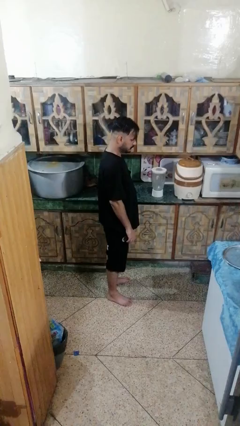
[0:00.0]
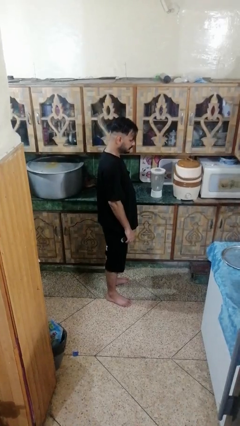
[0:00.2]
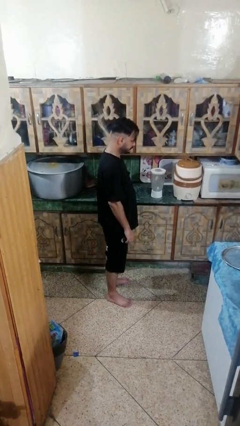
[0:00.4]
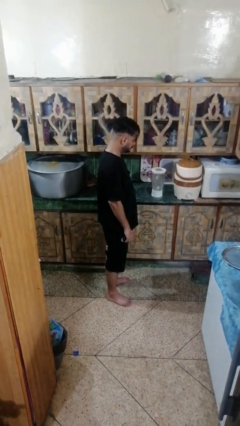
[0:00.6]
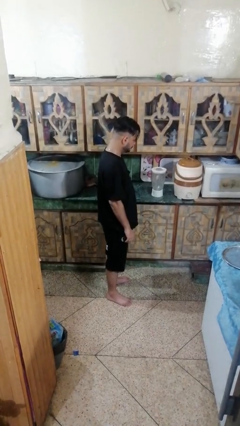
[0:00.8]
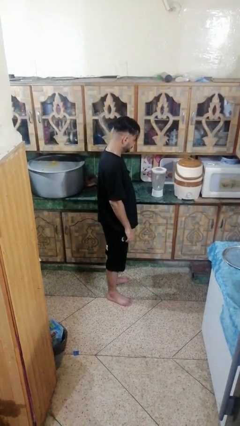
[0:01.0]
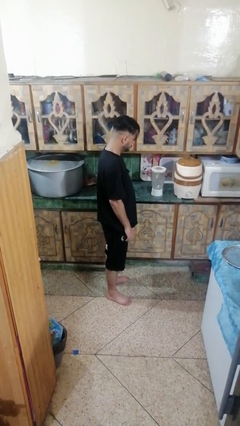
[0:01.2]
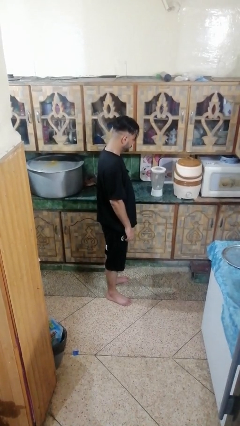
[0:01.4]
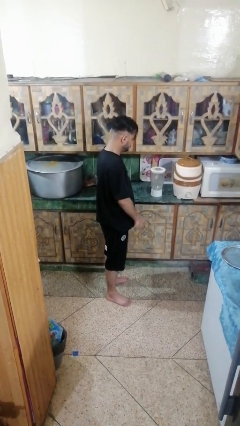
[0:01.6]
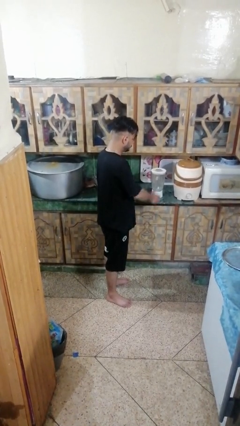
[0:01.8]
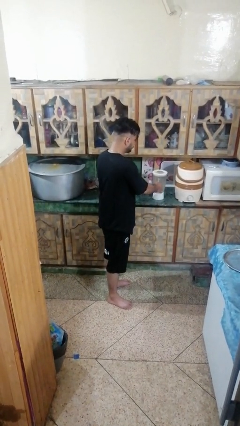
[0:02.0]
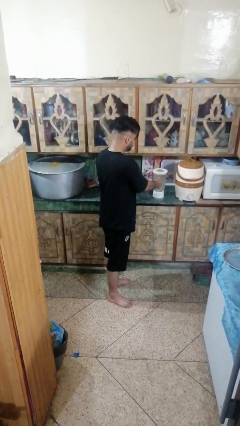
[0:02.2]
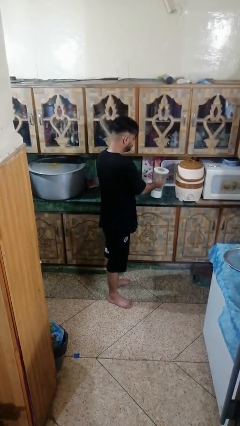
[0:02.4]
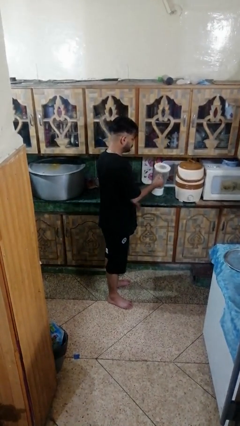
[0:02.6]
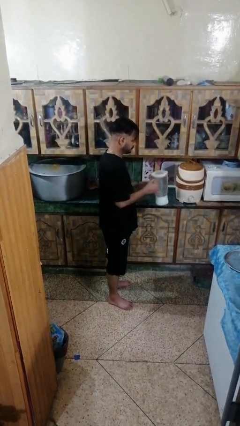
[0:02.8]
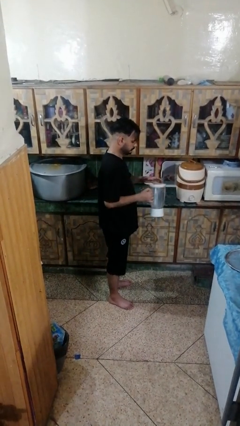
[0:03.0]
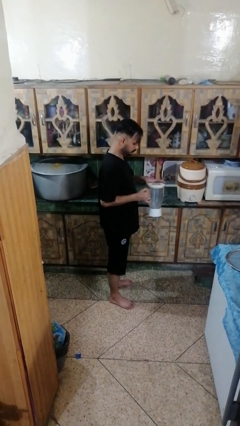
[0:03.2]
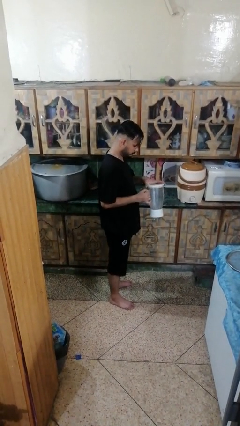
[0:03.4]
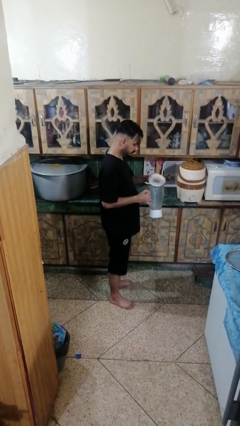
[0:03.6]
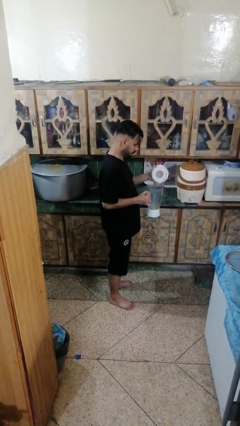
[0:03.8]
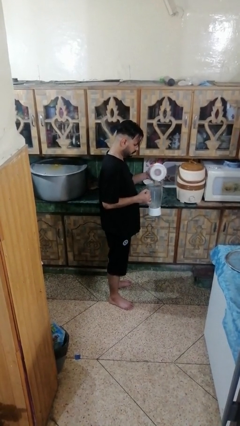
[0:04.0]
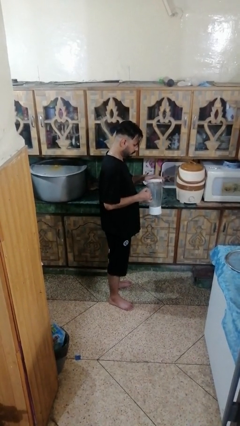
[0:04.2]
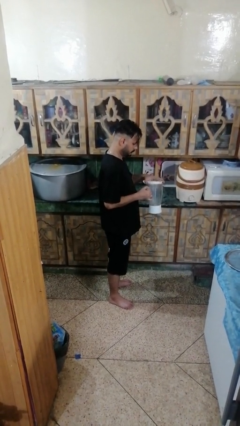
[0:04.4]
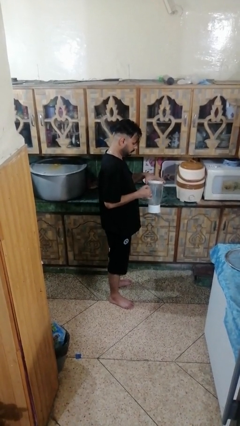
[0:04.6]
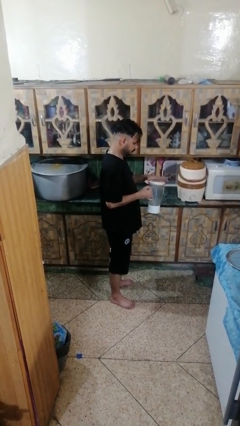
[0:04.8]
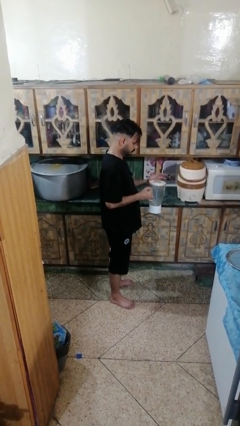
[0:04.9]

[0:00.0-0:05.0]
person picks up object from countertop

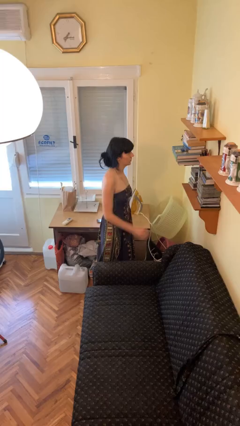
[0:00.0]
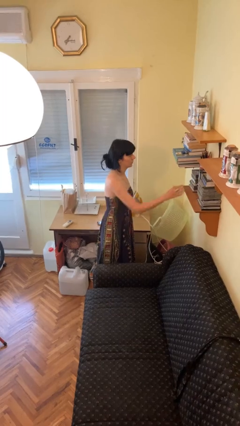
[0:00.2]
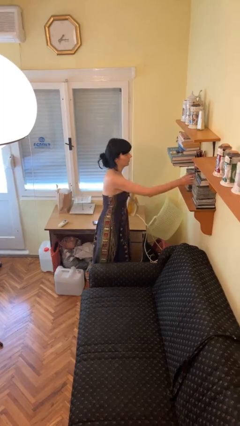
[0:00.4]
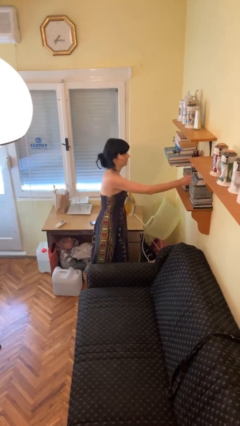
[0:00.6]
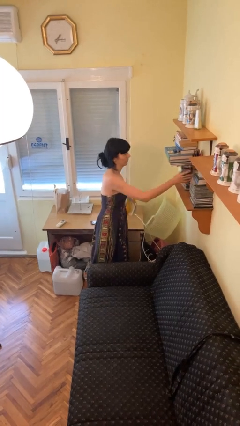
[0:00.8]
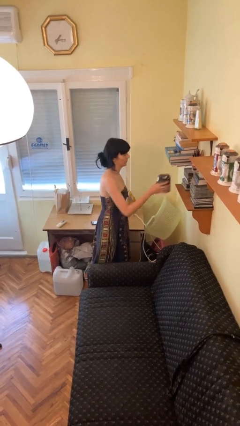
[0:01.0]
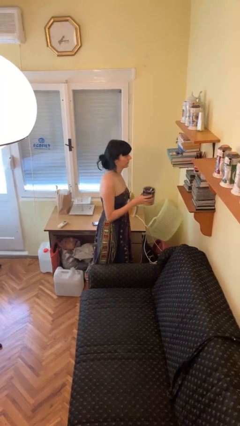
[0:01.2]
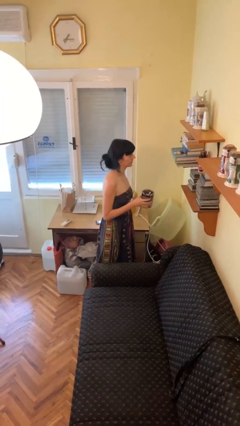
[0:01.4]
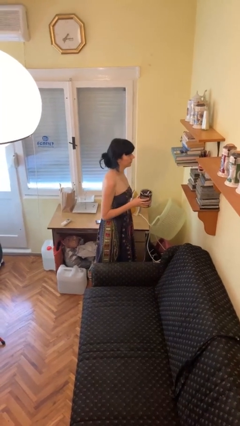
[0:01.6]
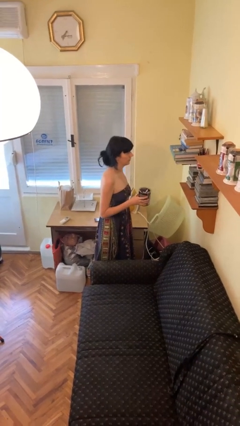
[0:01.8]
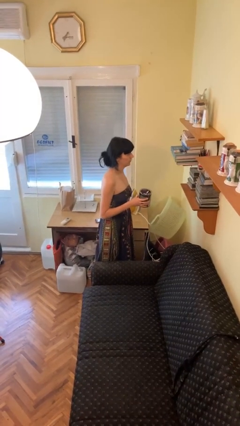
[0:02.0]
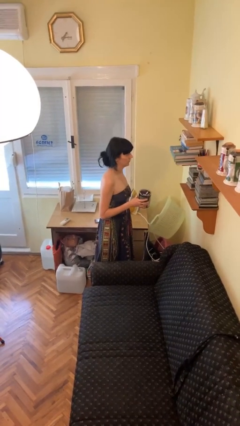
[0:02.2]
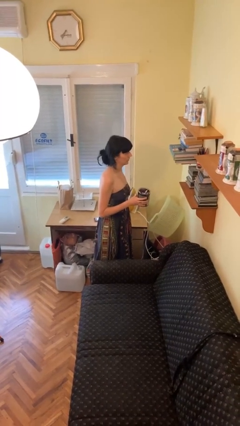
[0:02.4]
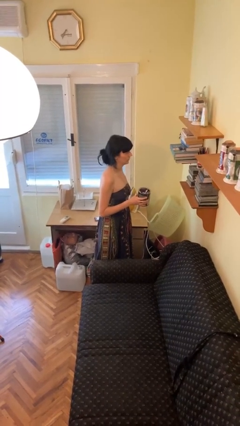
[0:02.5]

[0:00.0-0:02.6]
person picks up object from shelf

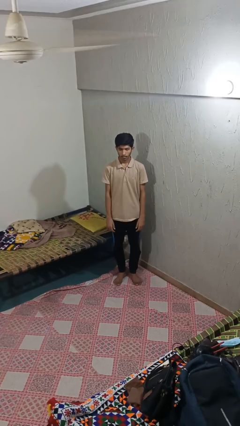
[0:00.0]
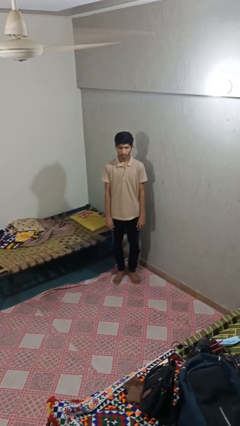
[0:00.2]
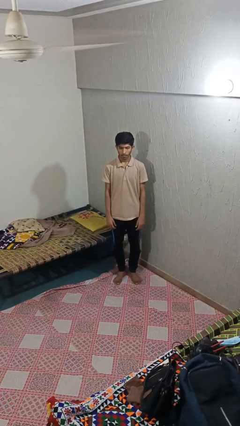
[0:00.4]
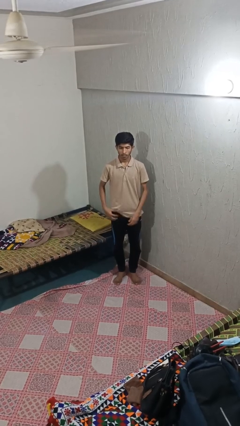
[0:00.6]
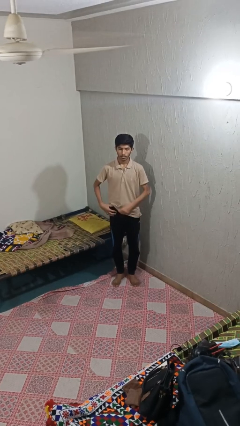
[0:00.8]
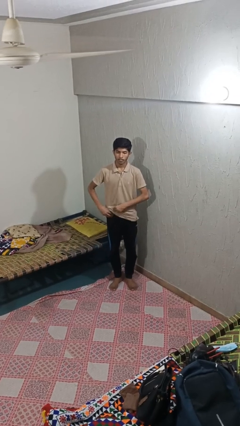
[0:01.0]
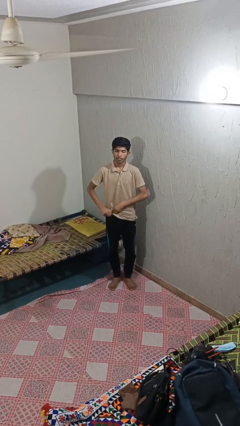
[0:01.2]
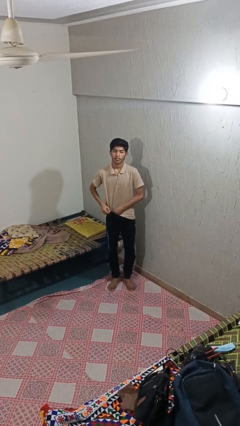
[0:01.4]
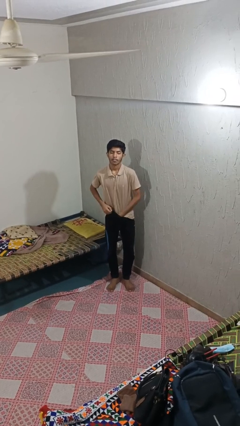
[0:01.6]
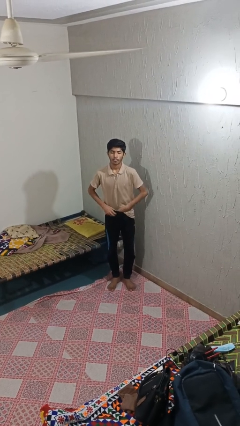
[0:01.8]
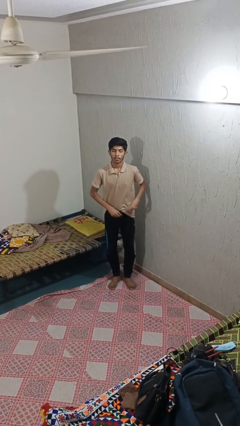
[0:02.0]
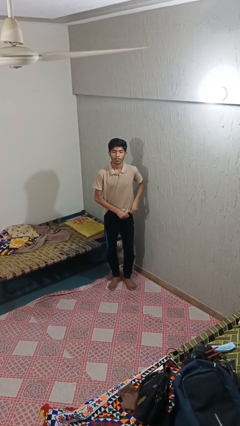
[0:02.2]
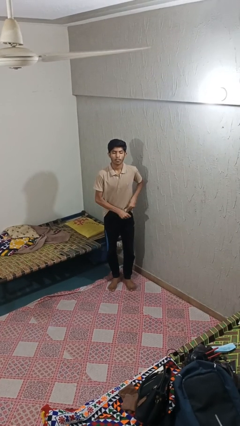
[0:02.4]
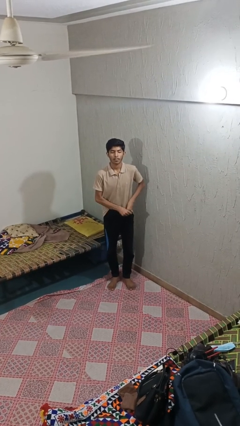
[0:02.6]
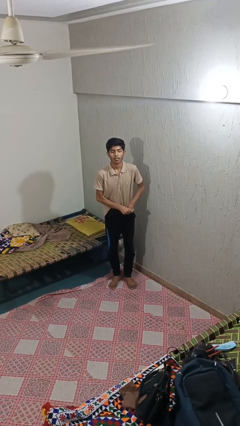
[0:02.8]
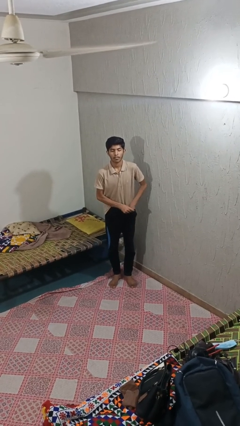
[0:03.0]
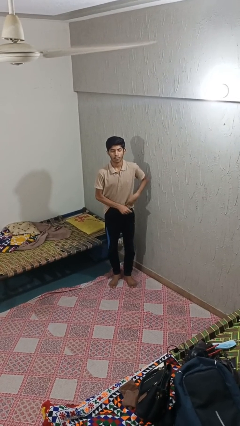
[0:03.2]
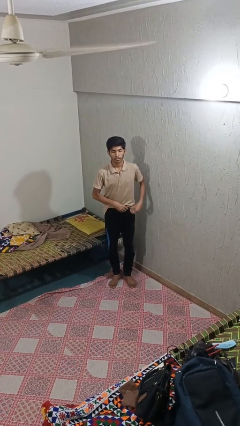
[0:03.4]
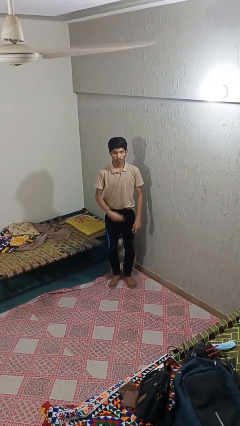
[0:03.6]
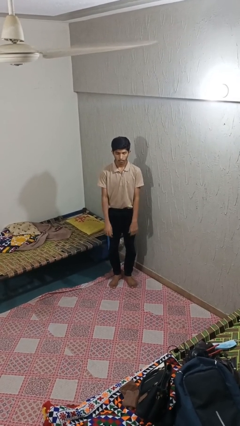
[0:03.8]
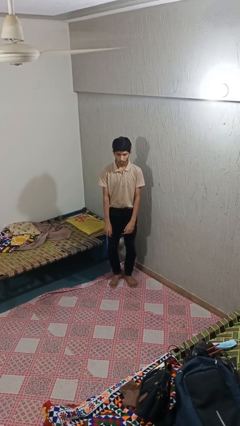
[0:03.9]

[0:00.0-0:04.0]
person tucks in shirt

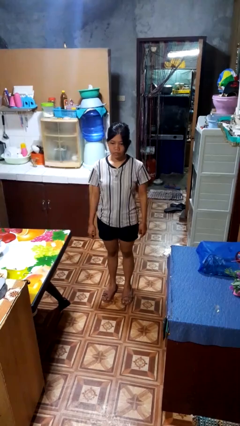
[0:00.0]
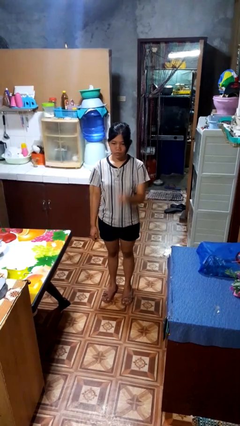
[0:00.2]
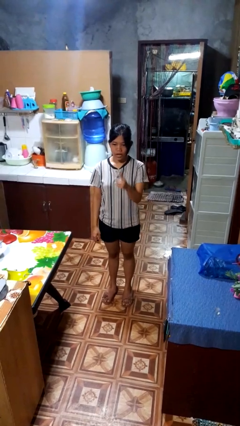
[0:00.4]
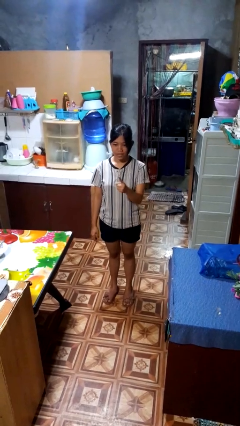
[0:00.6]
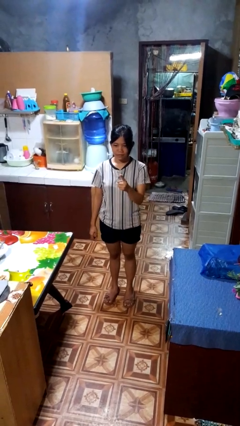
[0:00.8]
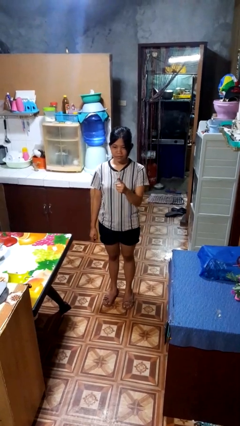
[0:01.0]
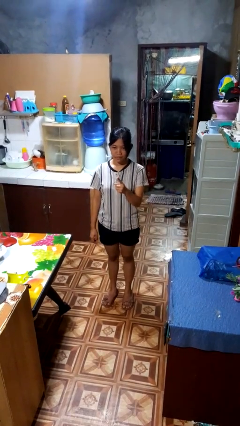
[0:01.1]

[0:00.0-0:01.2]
person gestures number one

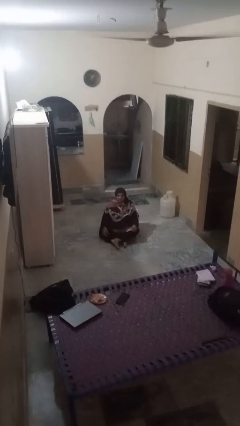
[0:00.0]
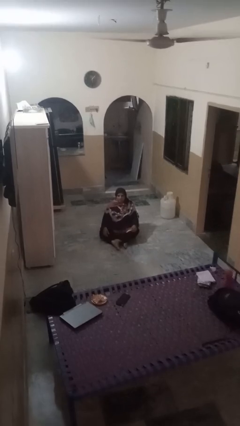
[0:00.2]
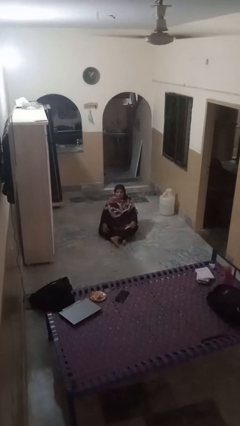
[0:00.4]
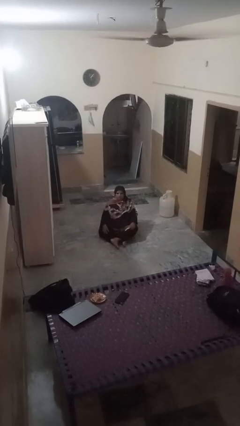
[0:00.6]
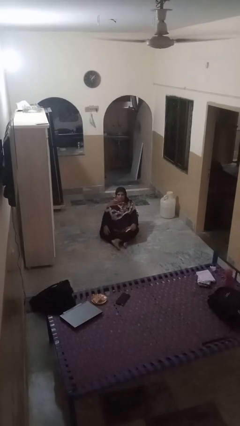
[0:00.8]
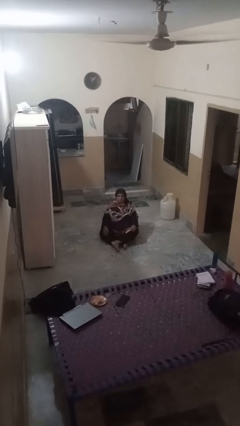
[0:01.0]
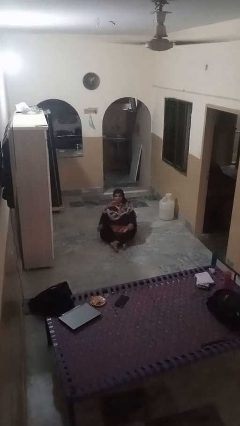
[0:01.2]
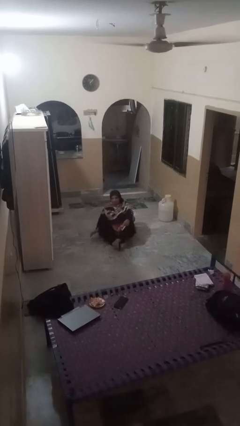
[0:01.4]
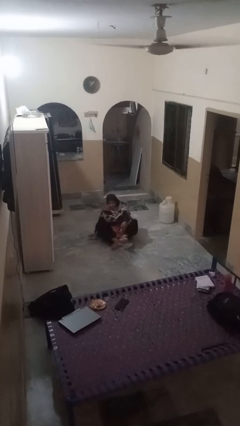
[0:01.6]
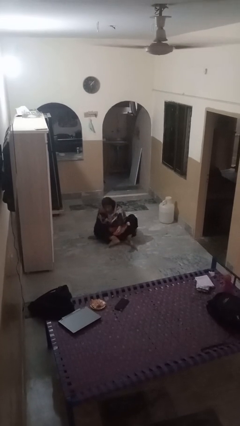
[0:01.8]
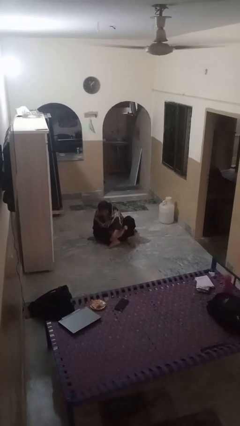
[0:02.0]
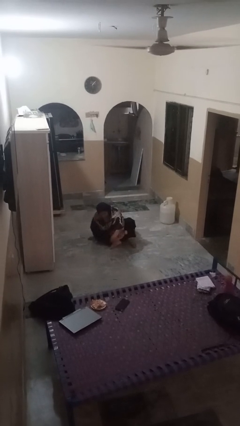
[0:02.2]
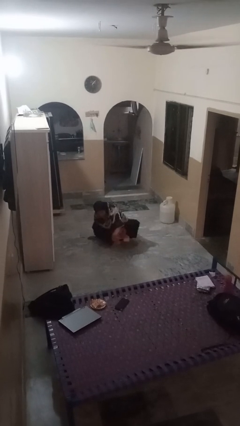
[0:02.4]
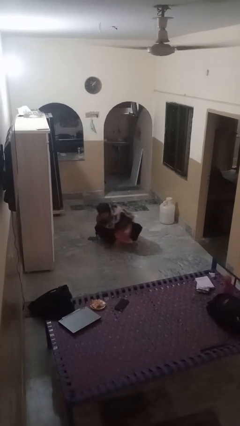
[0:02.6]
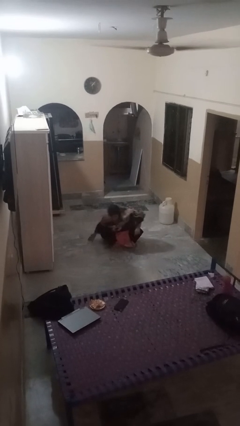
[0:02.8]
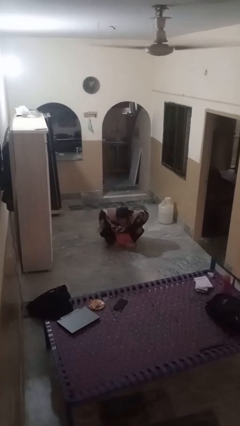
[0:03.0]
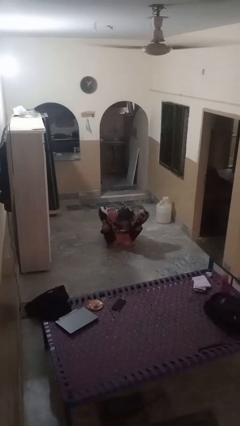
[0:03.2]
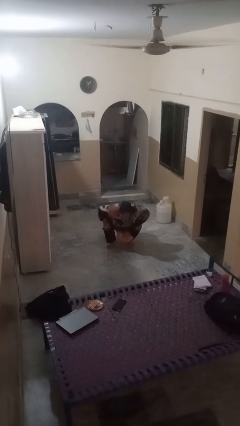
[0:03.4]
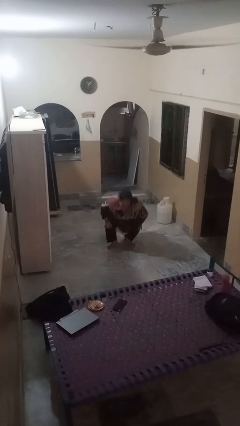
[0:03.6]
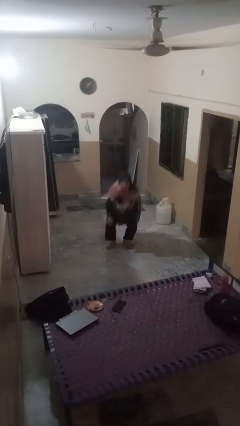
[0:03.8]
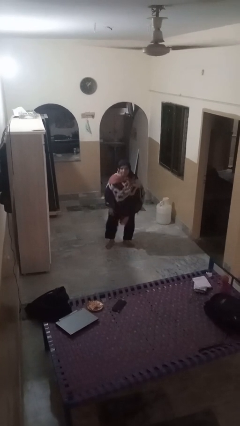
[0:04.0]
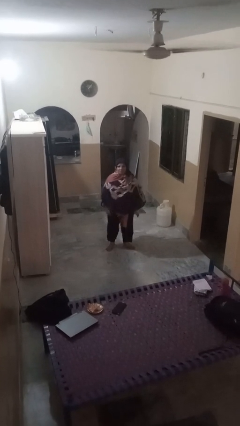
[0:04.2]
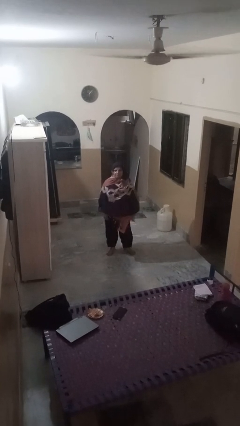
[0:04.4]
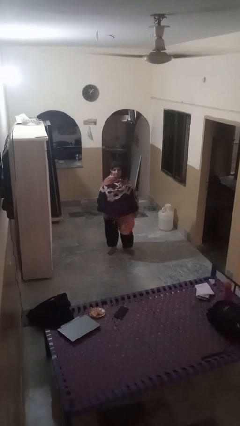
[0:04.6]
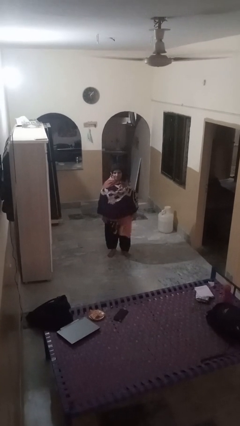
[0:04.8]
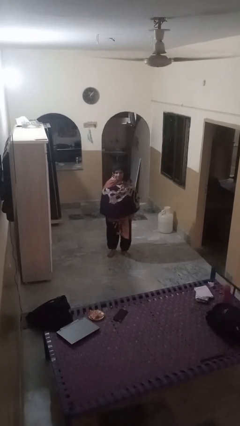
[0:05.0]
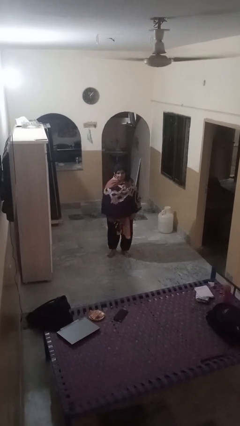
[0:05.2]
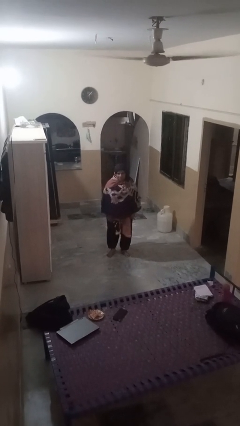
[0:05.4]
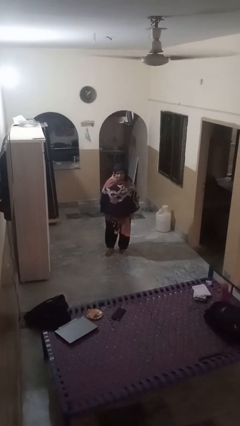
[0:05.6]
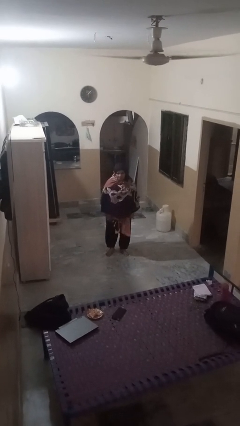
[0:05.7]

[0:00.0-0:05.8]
person stands up from floor
